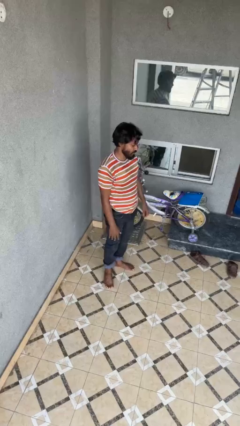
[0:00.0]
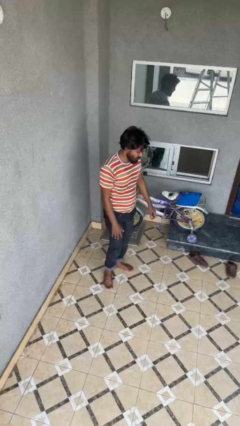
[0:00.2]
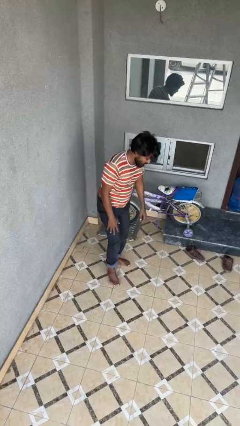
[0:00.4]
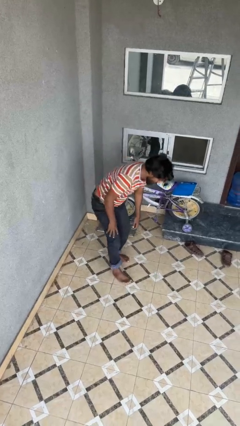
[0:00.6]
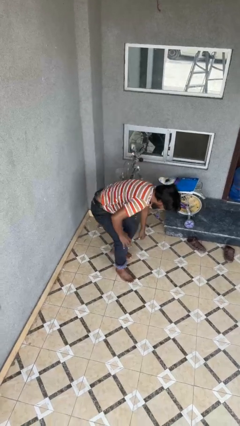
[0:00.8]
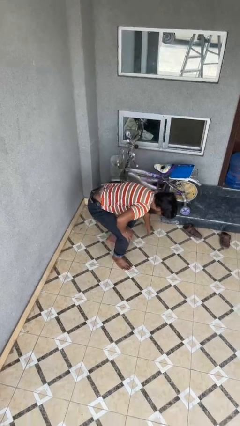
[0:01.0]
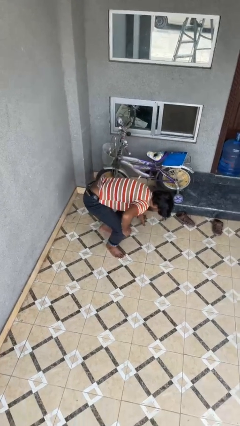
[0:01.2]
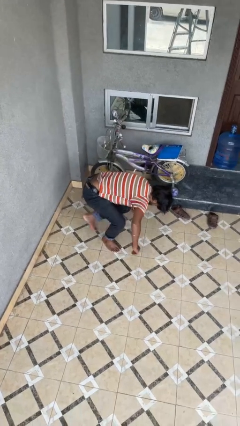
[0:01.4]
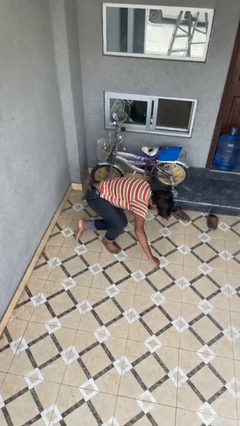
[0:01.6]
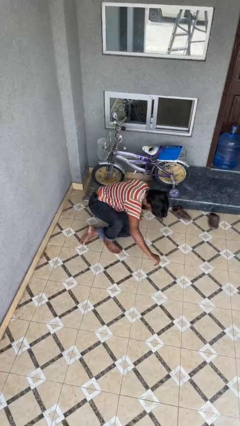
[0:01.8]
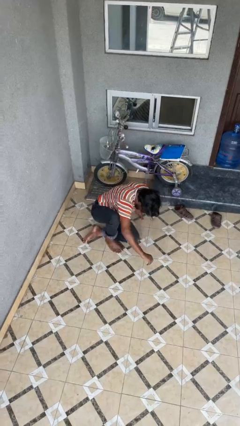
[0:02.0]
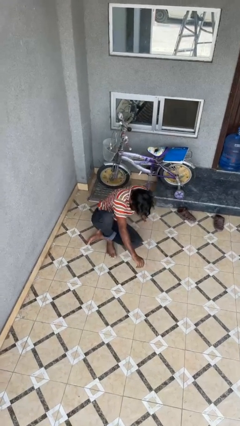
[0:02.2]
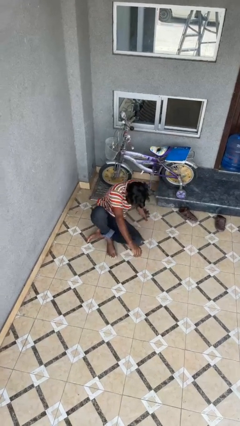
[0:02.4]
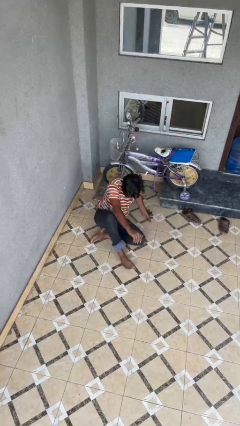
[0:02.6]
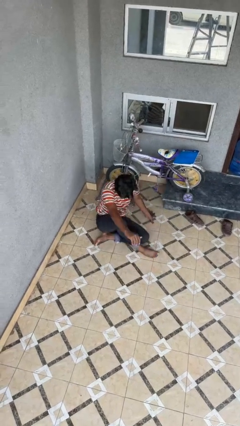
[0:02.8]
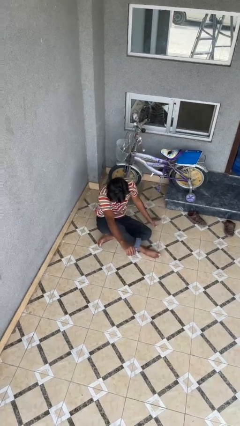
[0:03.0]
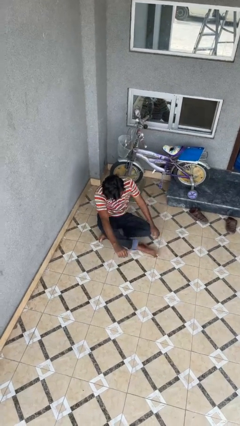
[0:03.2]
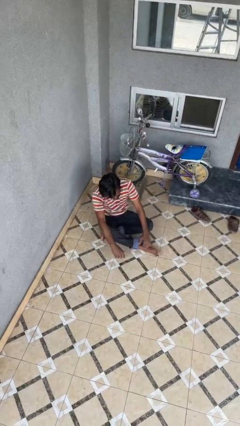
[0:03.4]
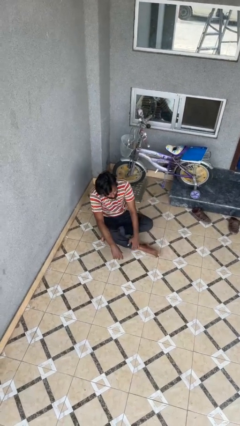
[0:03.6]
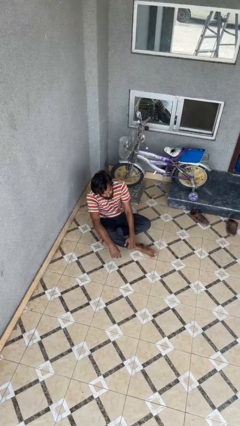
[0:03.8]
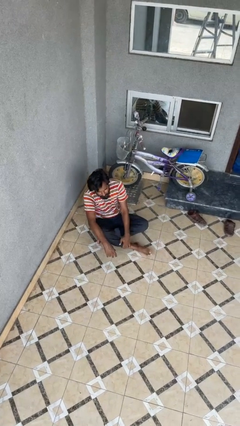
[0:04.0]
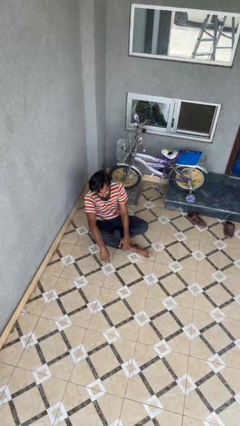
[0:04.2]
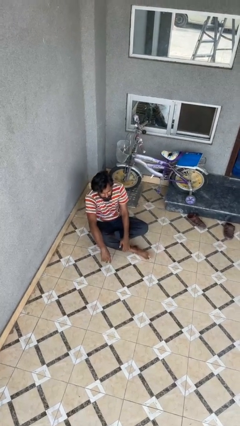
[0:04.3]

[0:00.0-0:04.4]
person sits crisscross

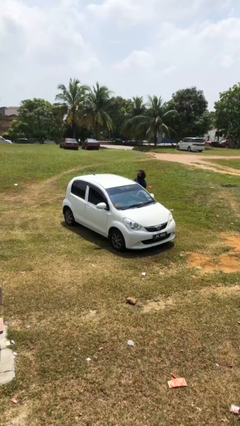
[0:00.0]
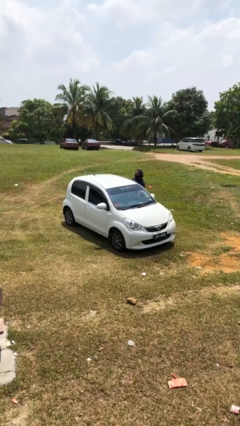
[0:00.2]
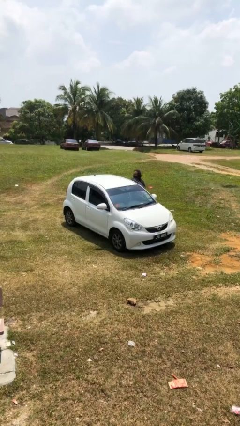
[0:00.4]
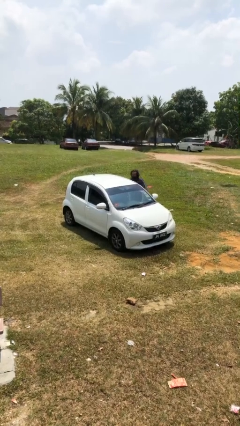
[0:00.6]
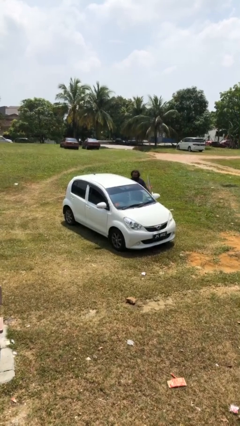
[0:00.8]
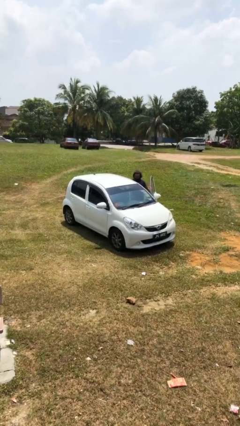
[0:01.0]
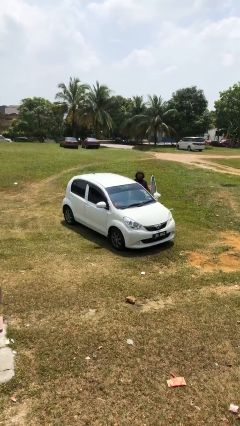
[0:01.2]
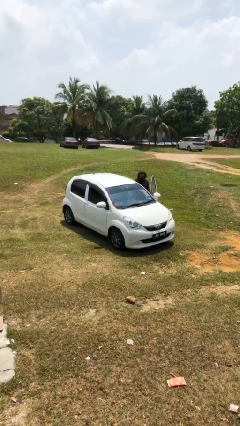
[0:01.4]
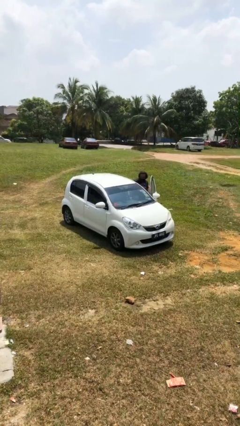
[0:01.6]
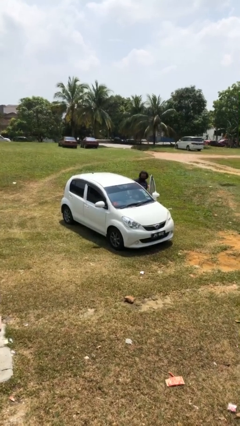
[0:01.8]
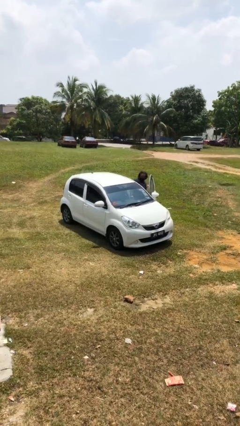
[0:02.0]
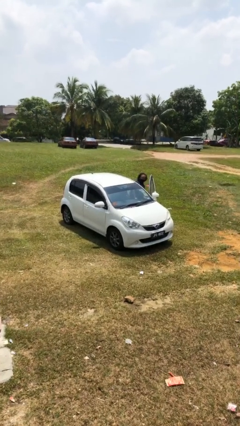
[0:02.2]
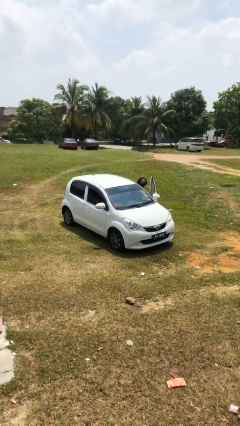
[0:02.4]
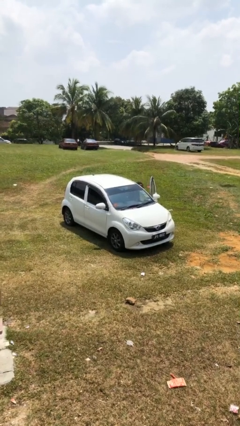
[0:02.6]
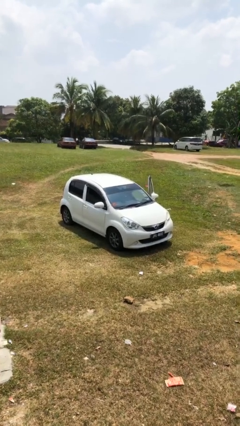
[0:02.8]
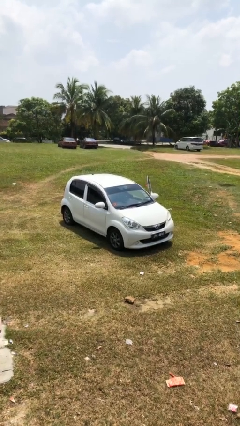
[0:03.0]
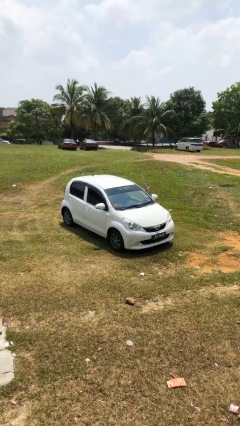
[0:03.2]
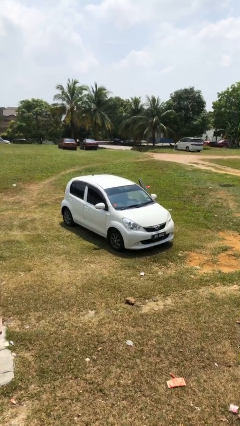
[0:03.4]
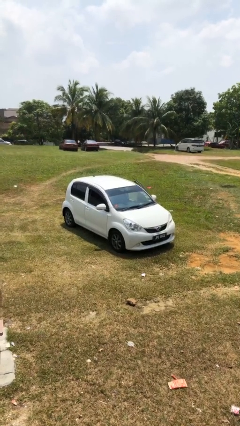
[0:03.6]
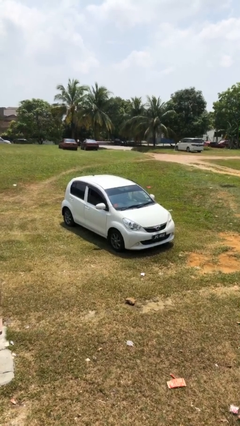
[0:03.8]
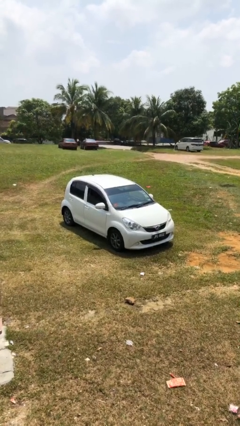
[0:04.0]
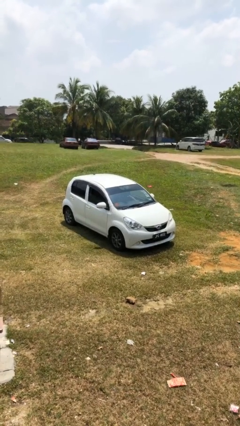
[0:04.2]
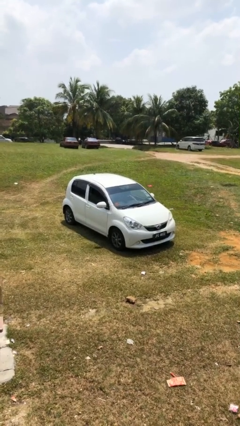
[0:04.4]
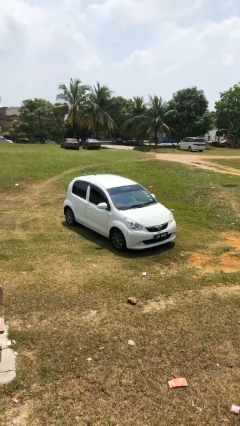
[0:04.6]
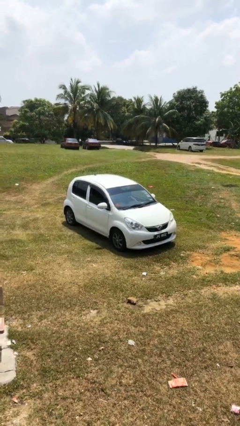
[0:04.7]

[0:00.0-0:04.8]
car picks up person

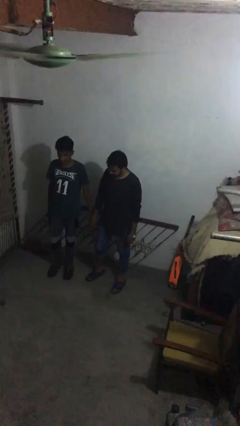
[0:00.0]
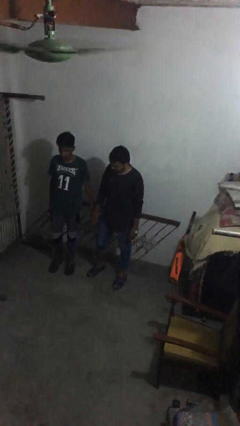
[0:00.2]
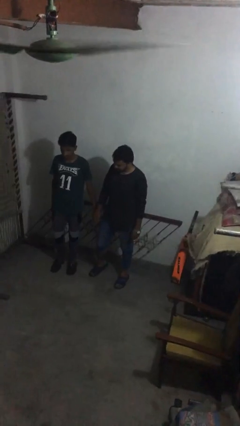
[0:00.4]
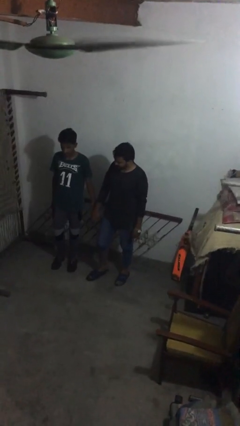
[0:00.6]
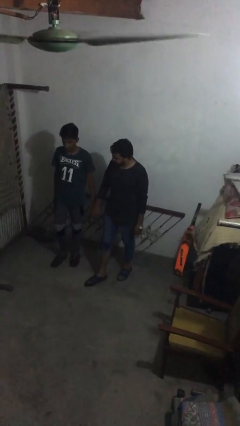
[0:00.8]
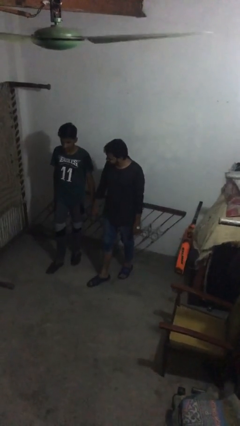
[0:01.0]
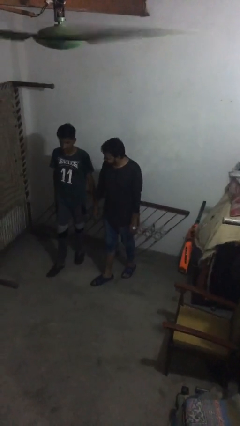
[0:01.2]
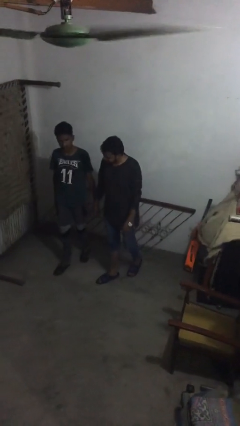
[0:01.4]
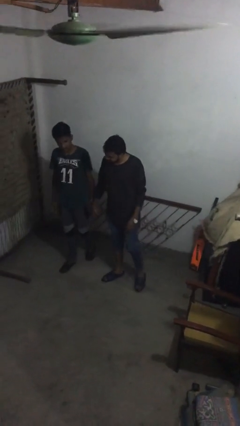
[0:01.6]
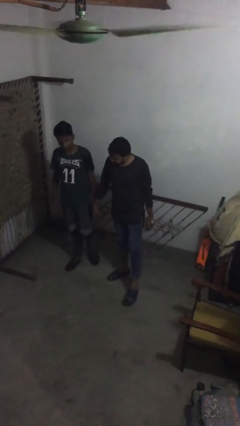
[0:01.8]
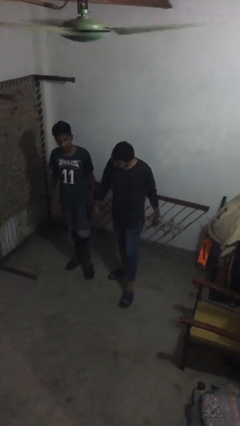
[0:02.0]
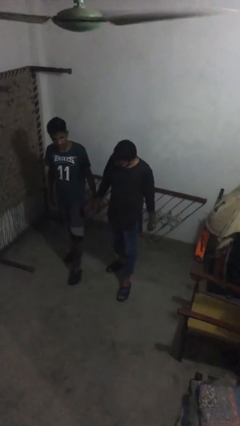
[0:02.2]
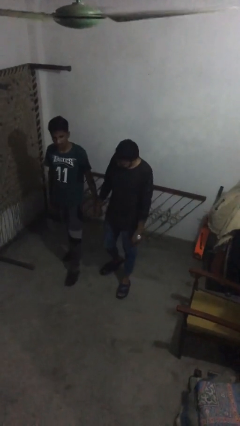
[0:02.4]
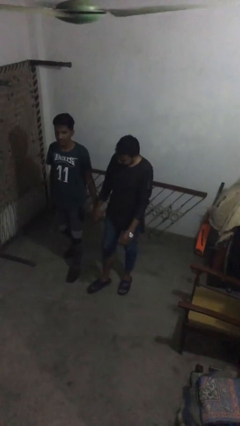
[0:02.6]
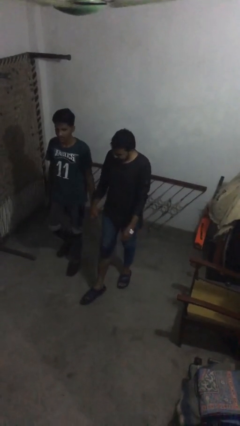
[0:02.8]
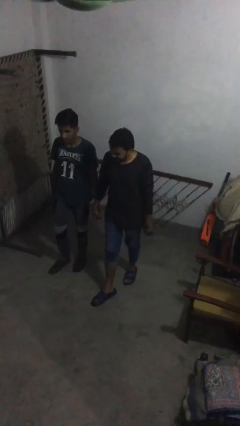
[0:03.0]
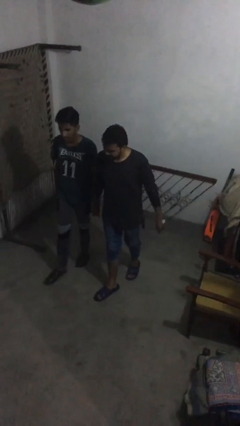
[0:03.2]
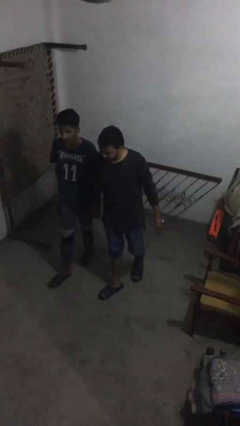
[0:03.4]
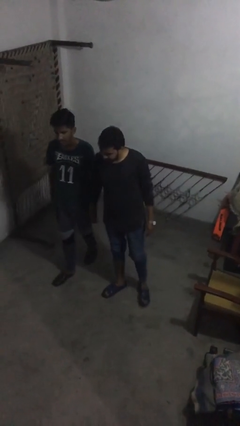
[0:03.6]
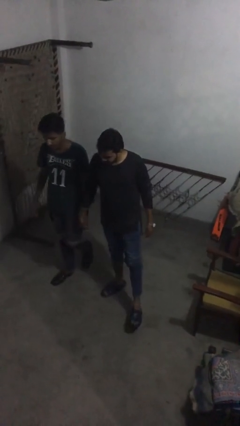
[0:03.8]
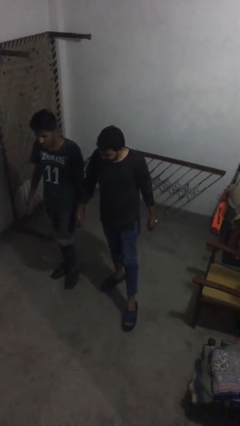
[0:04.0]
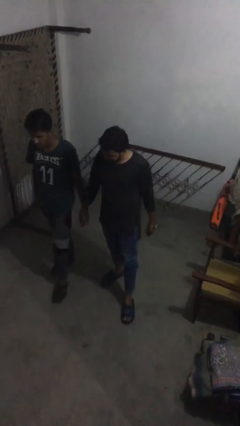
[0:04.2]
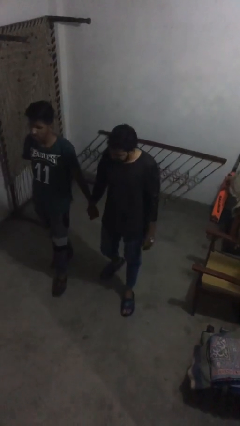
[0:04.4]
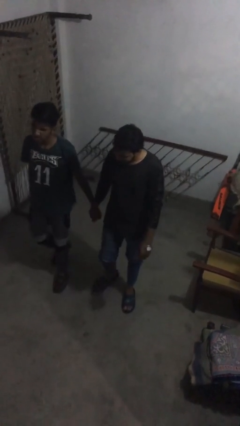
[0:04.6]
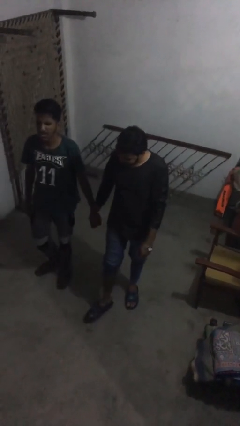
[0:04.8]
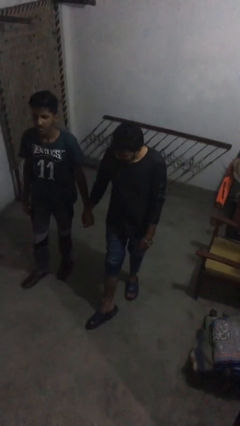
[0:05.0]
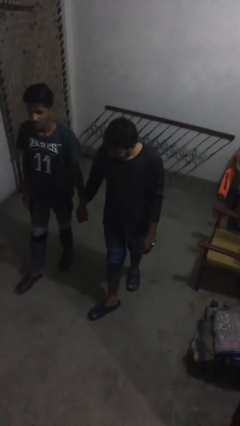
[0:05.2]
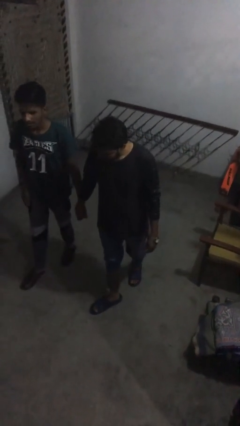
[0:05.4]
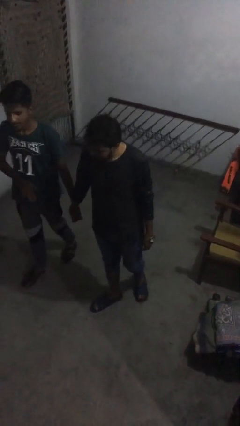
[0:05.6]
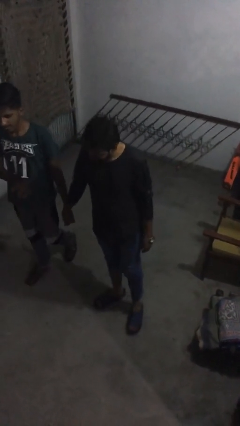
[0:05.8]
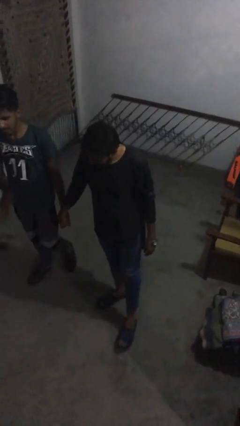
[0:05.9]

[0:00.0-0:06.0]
person holds hand

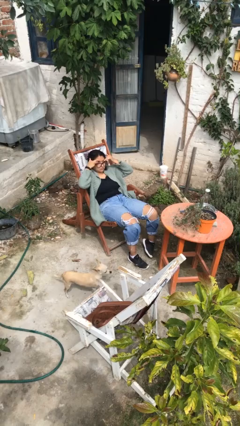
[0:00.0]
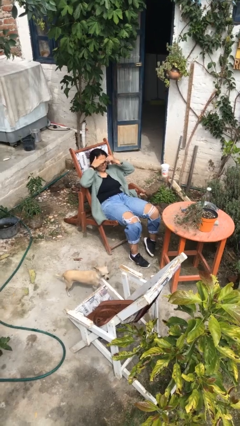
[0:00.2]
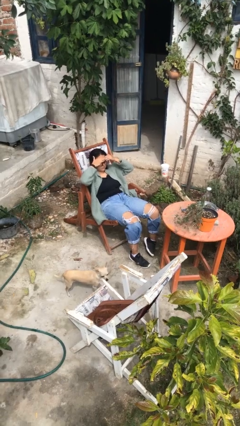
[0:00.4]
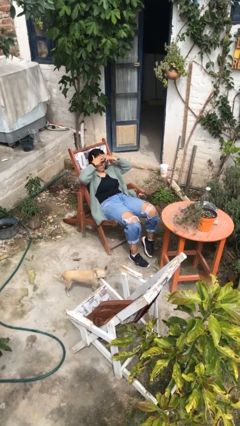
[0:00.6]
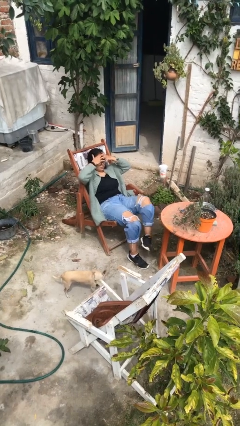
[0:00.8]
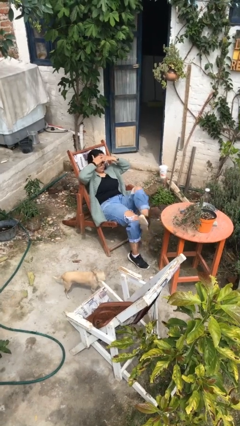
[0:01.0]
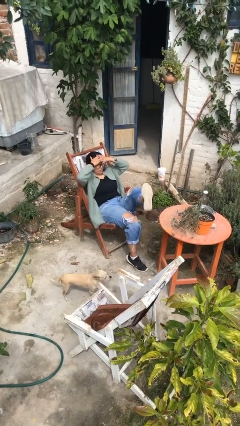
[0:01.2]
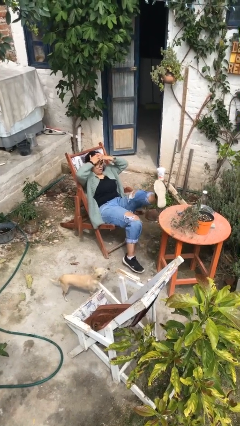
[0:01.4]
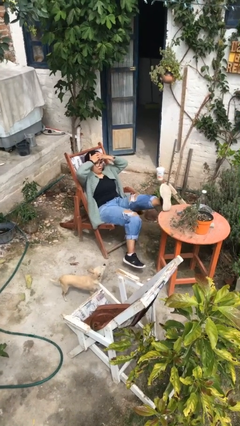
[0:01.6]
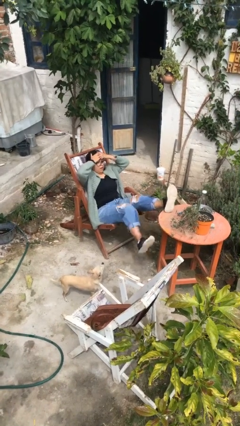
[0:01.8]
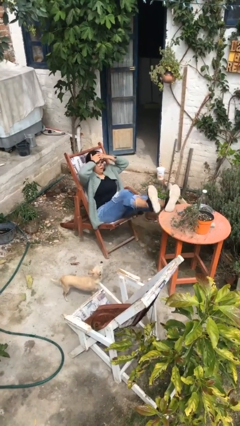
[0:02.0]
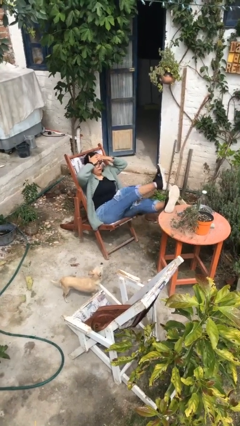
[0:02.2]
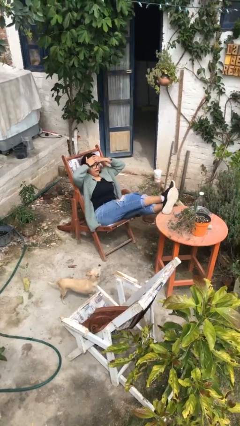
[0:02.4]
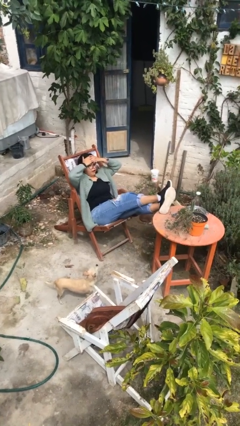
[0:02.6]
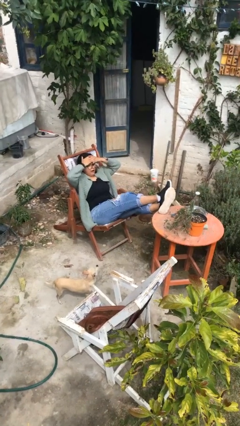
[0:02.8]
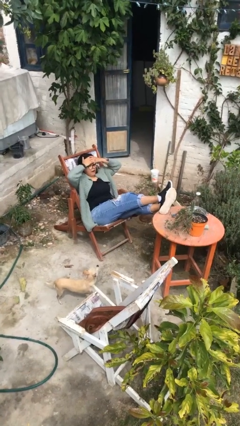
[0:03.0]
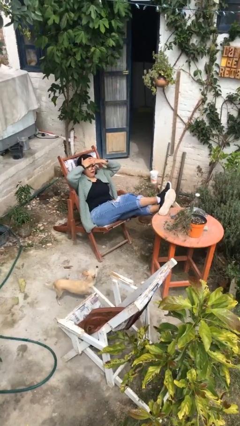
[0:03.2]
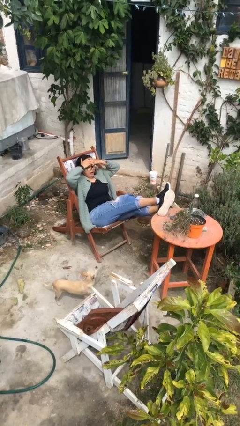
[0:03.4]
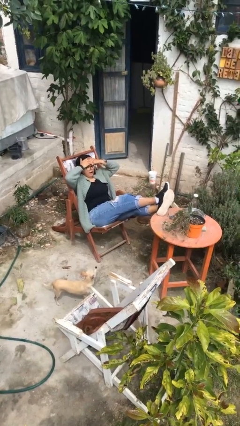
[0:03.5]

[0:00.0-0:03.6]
person puts feet up
